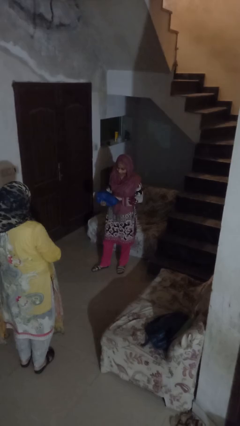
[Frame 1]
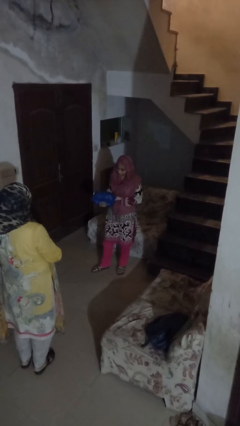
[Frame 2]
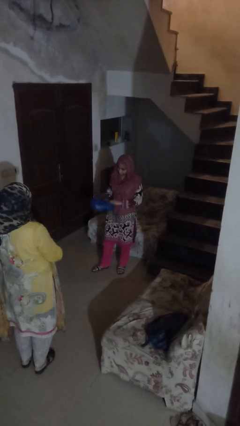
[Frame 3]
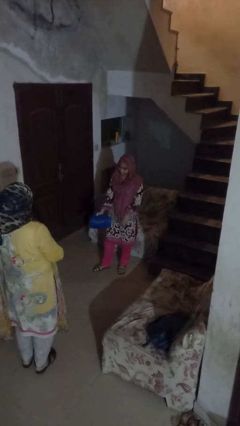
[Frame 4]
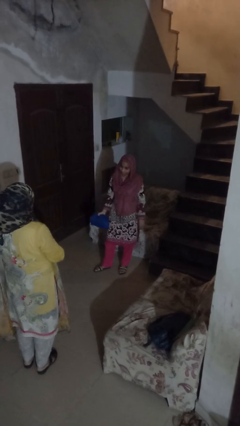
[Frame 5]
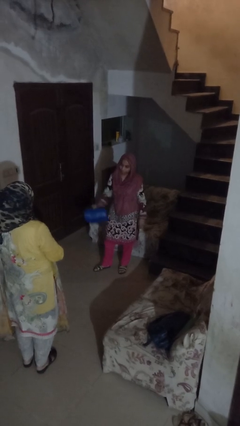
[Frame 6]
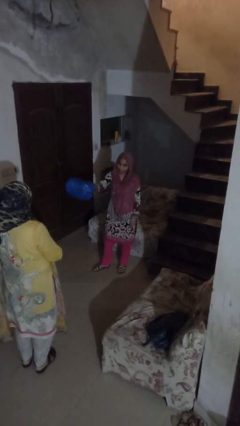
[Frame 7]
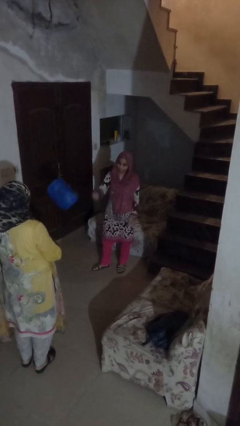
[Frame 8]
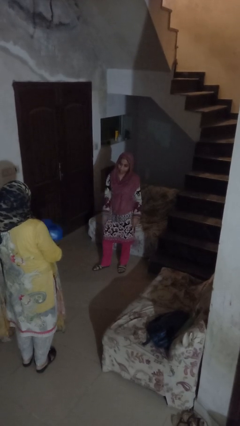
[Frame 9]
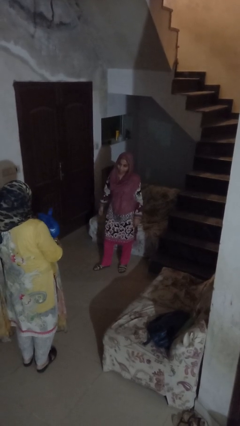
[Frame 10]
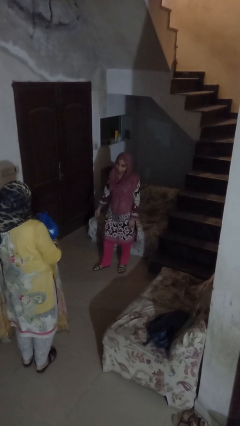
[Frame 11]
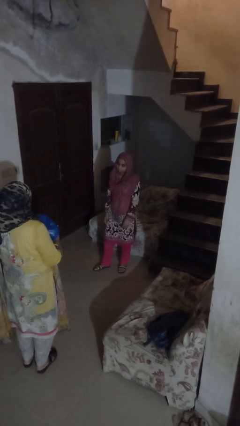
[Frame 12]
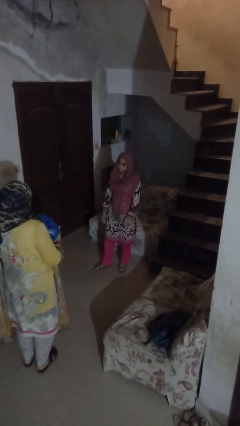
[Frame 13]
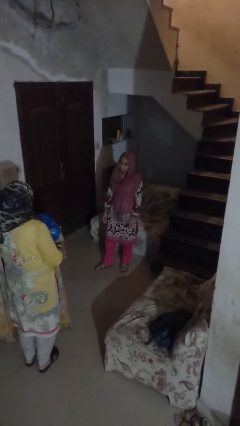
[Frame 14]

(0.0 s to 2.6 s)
person throws object to person

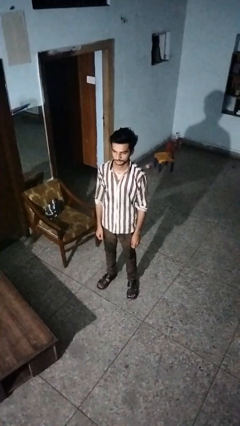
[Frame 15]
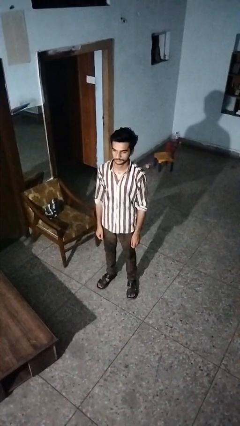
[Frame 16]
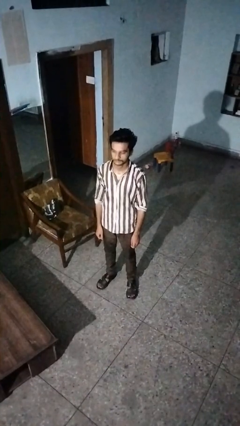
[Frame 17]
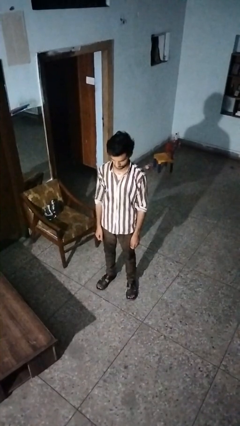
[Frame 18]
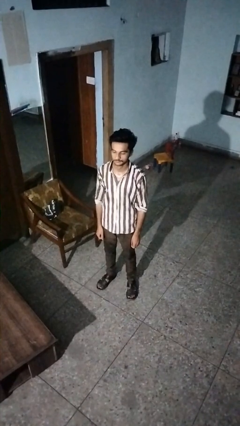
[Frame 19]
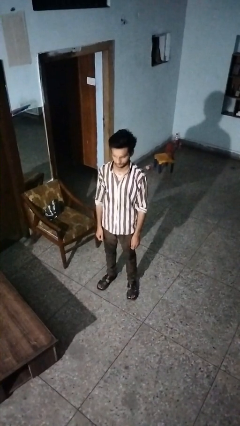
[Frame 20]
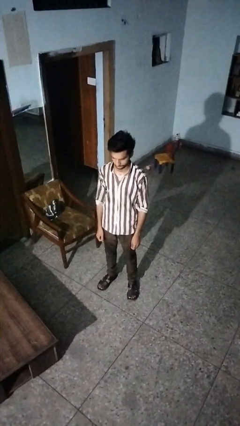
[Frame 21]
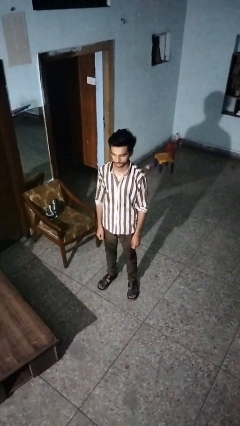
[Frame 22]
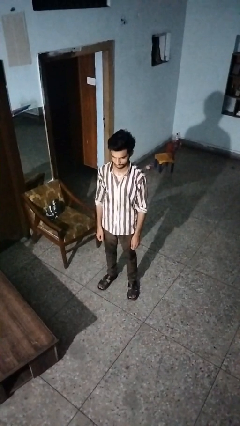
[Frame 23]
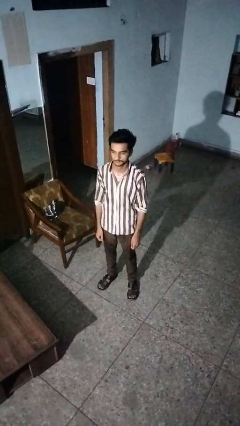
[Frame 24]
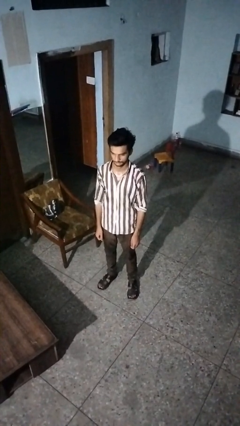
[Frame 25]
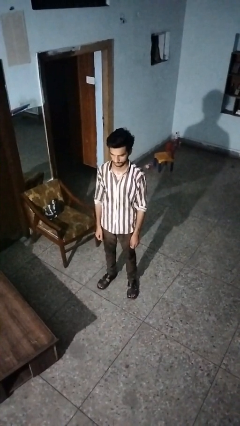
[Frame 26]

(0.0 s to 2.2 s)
person nods head

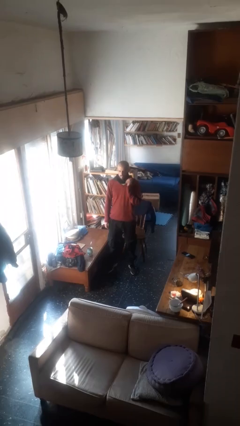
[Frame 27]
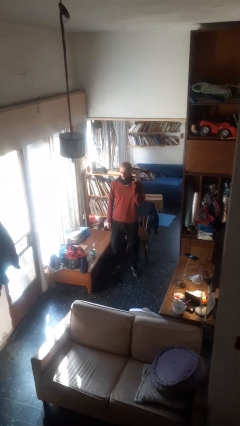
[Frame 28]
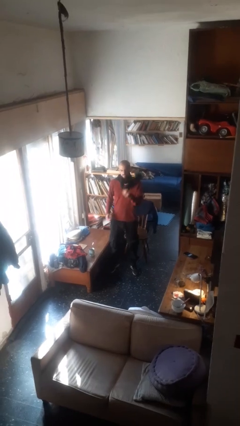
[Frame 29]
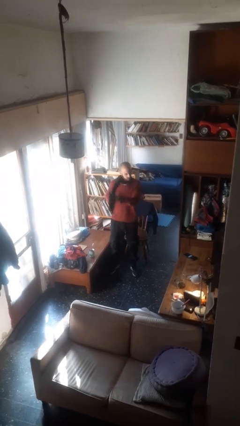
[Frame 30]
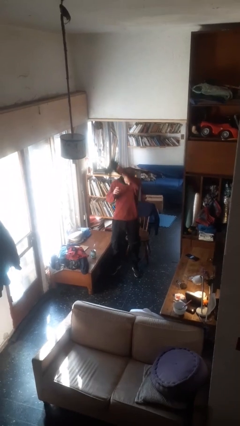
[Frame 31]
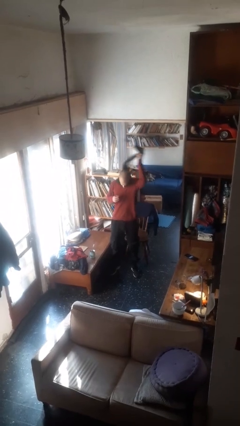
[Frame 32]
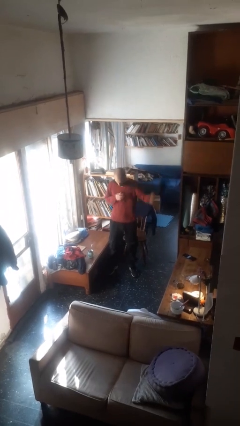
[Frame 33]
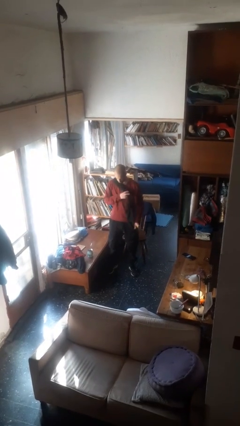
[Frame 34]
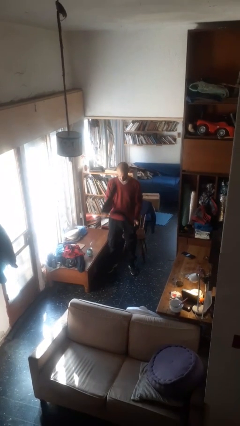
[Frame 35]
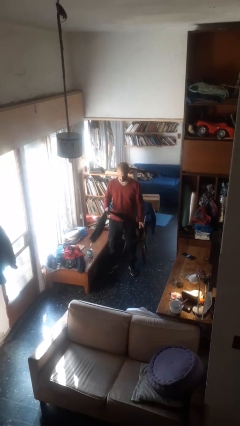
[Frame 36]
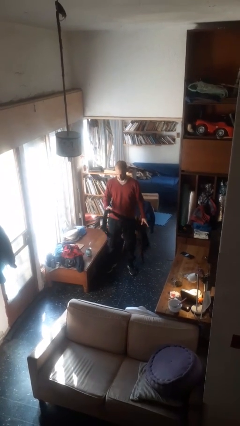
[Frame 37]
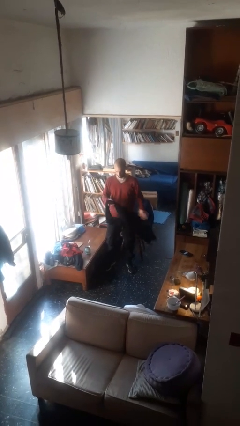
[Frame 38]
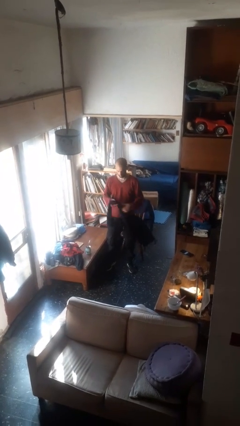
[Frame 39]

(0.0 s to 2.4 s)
person takes off scarf

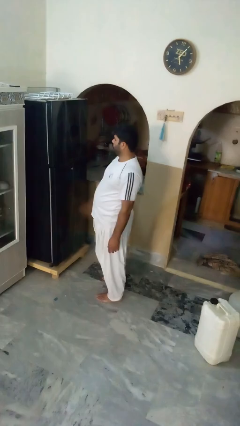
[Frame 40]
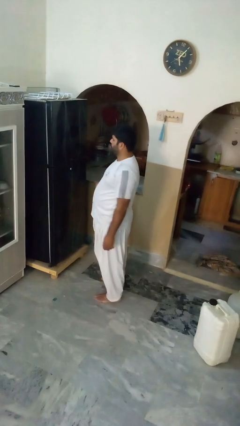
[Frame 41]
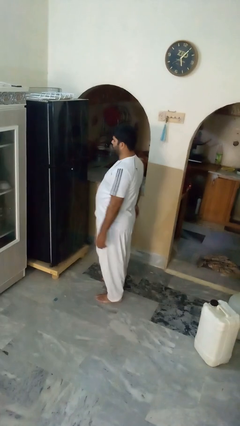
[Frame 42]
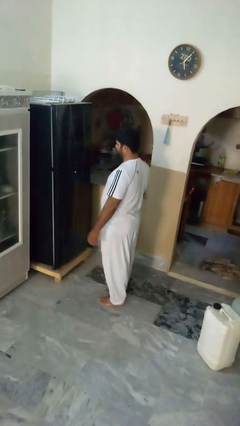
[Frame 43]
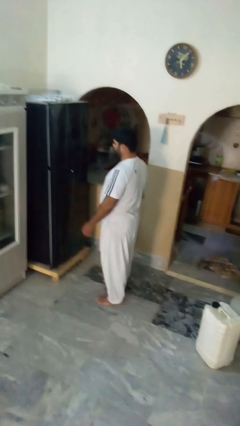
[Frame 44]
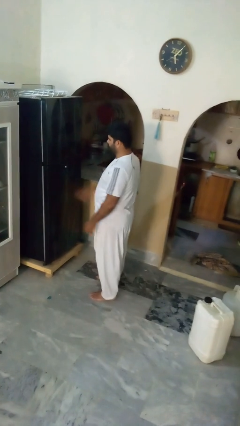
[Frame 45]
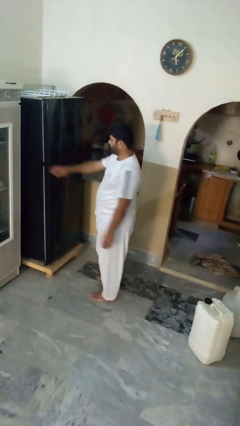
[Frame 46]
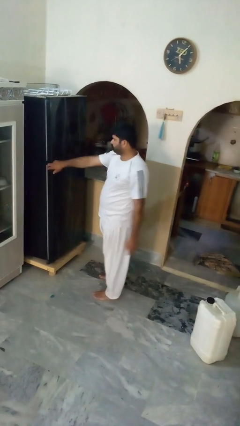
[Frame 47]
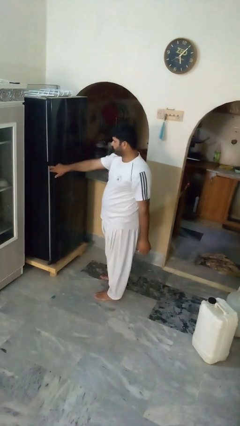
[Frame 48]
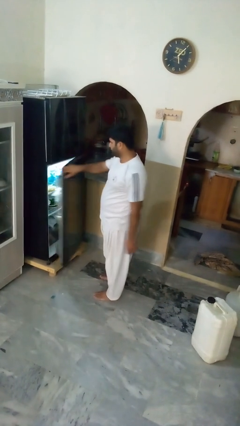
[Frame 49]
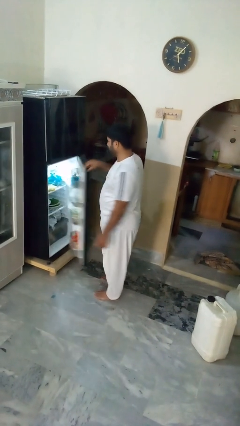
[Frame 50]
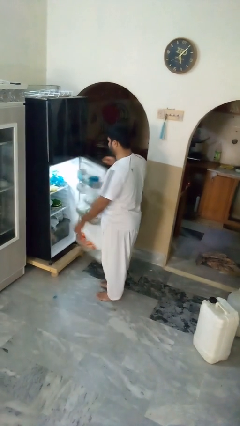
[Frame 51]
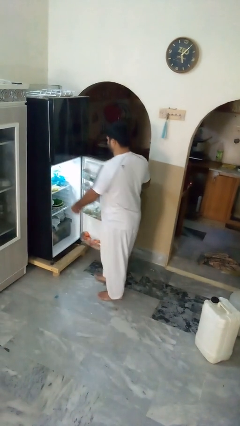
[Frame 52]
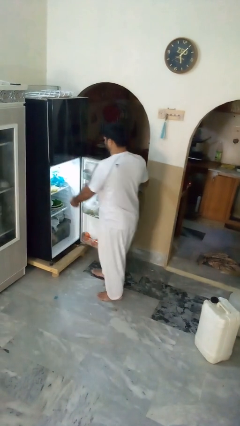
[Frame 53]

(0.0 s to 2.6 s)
person takes object from refrigerator

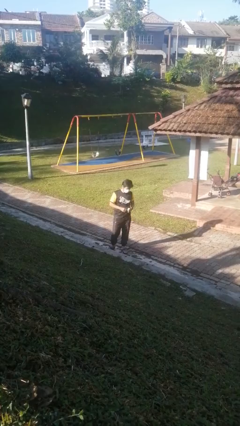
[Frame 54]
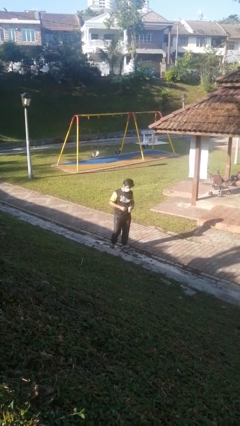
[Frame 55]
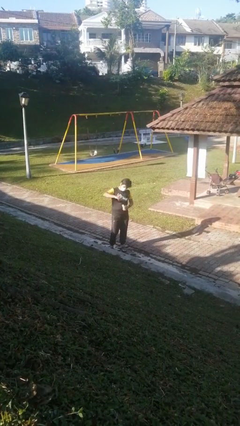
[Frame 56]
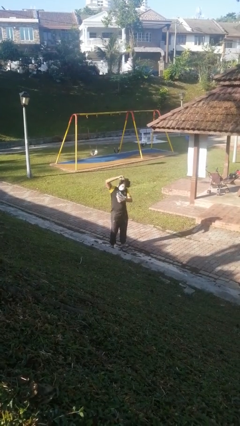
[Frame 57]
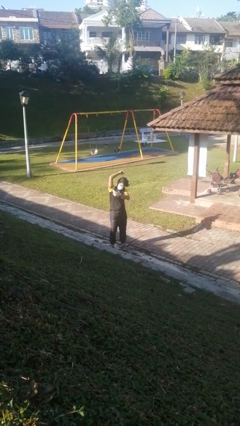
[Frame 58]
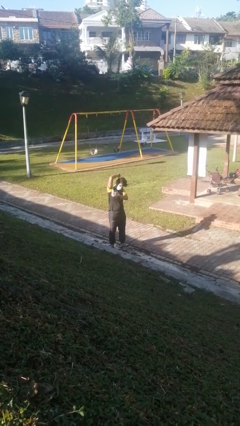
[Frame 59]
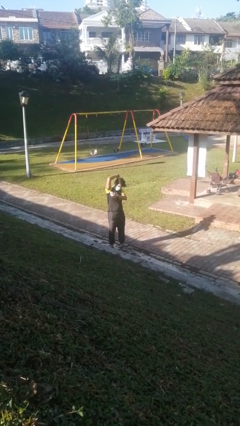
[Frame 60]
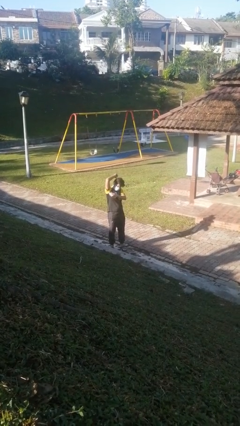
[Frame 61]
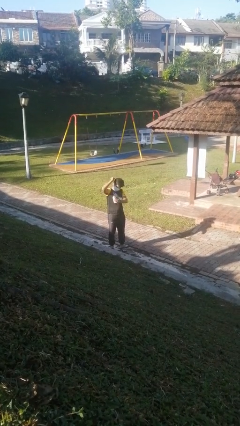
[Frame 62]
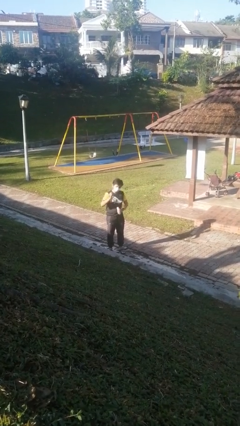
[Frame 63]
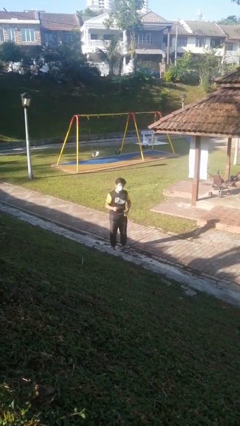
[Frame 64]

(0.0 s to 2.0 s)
person applies deodorant

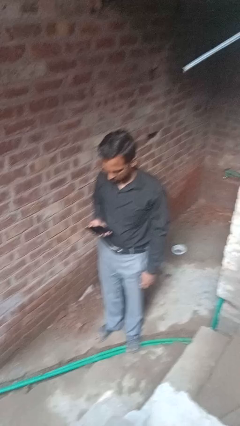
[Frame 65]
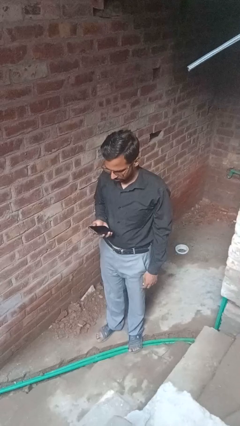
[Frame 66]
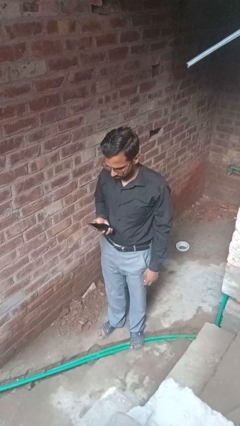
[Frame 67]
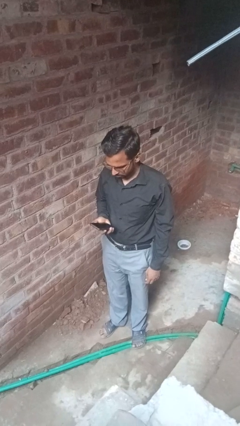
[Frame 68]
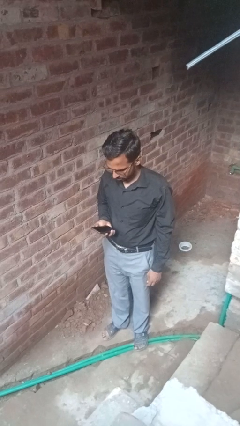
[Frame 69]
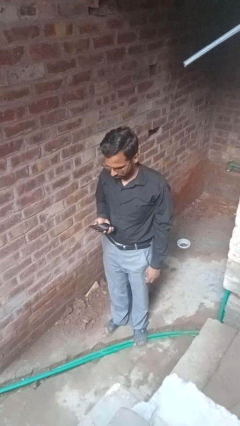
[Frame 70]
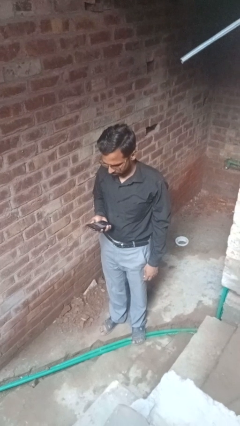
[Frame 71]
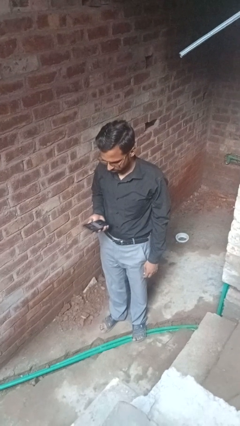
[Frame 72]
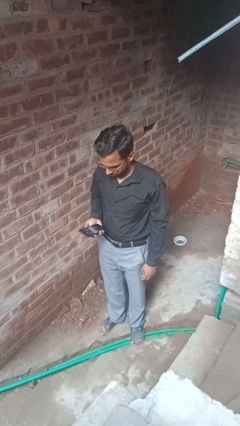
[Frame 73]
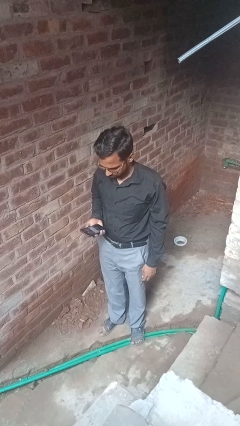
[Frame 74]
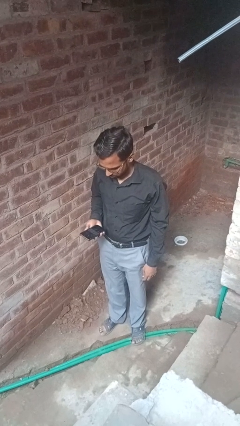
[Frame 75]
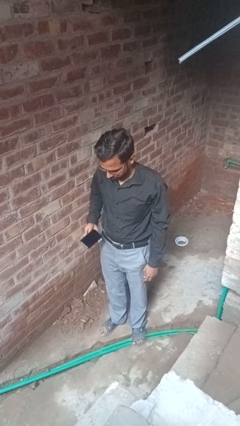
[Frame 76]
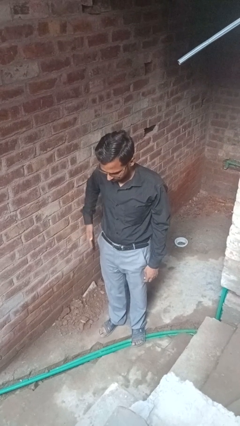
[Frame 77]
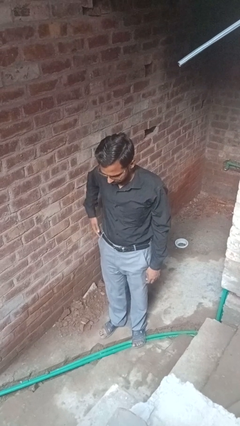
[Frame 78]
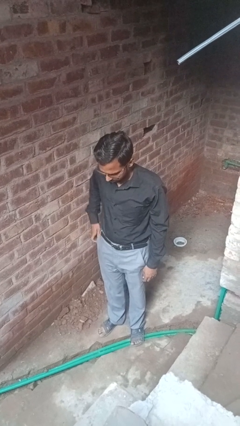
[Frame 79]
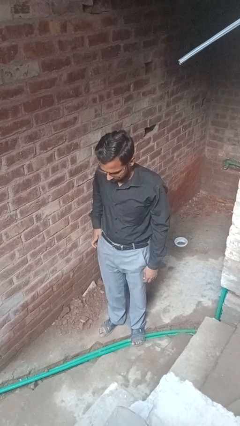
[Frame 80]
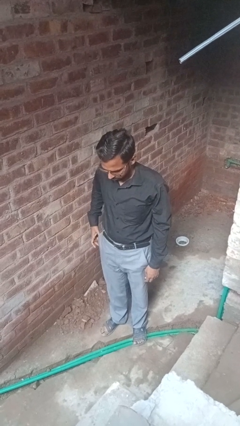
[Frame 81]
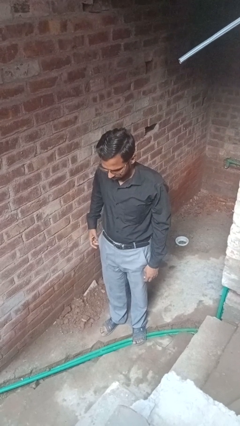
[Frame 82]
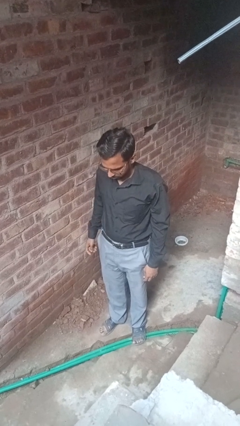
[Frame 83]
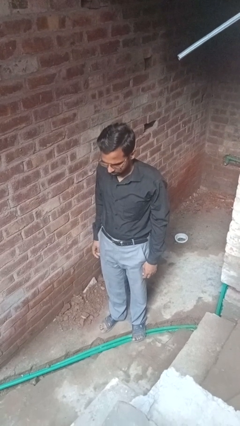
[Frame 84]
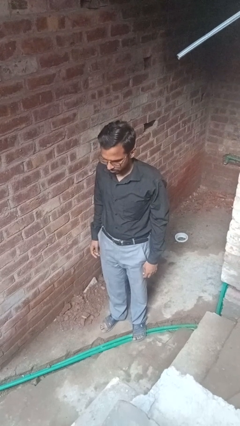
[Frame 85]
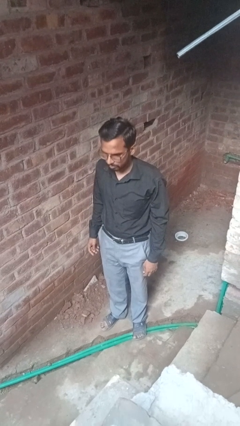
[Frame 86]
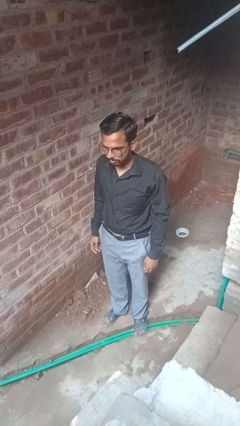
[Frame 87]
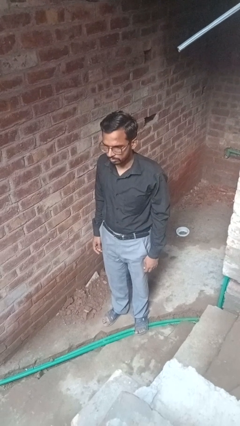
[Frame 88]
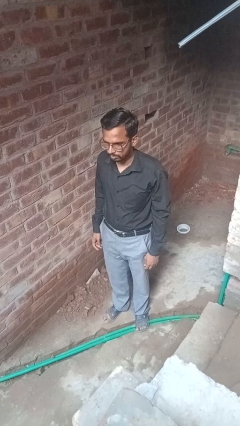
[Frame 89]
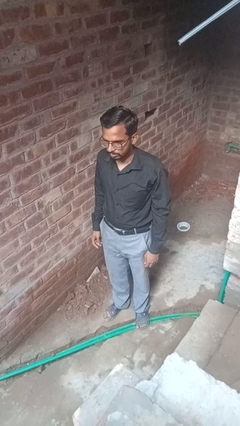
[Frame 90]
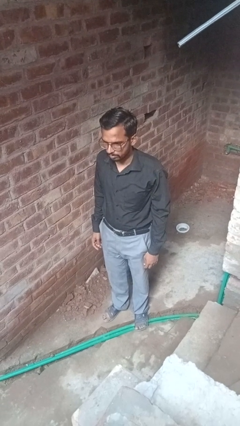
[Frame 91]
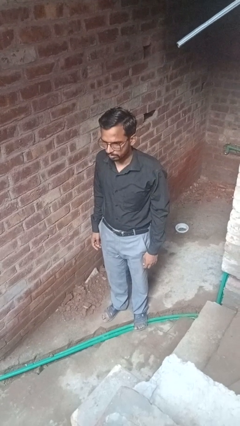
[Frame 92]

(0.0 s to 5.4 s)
person puts phone into pocket
